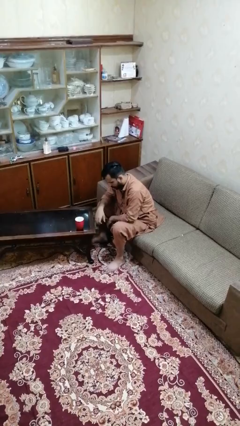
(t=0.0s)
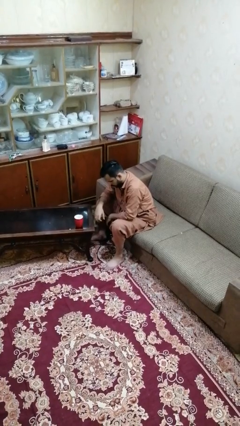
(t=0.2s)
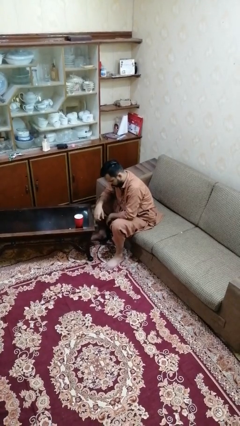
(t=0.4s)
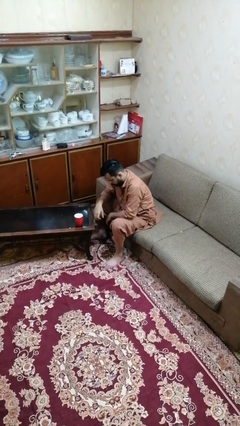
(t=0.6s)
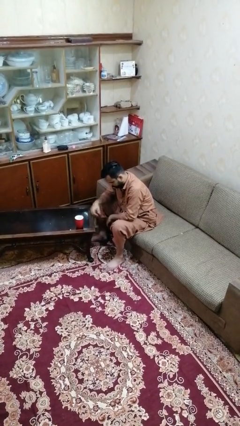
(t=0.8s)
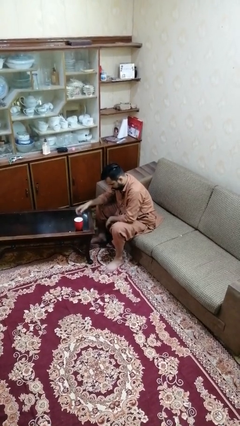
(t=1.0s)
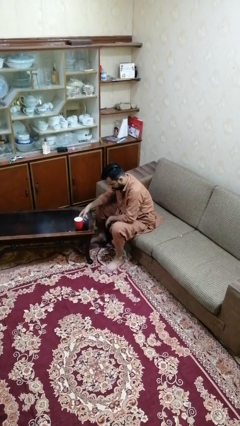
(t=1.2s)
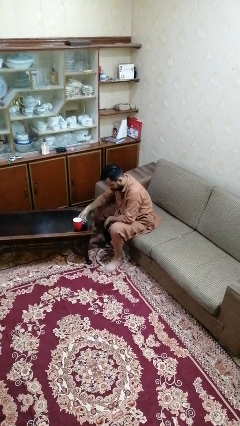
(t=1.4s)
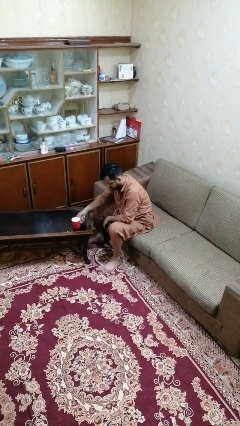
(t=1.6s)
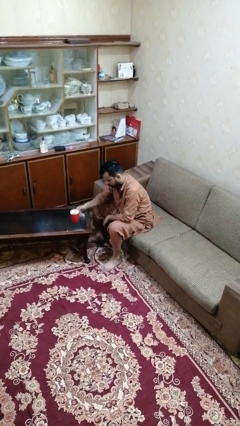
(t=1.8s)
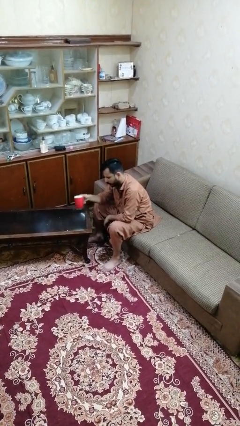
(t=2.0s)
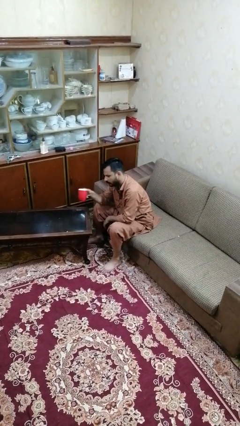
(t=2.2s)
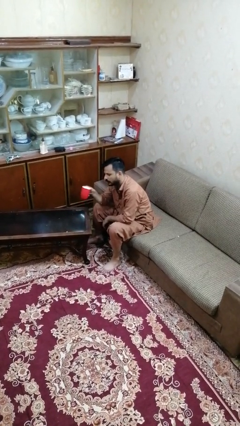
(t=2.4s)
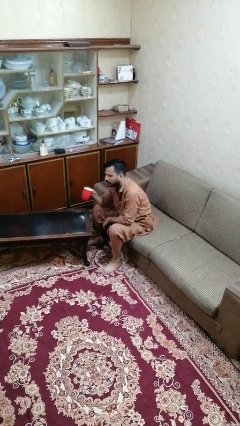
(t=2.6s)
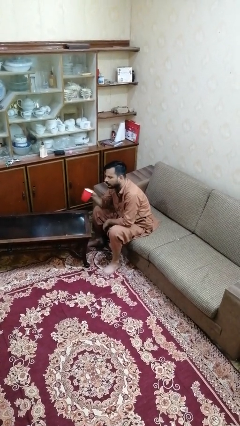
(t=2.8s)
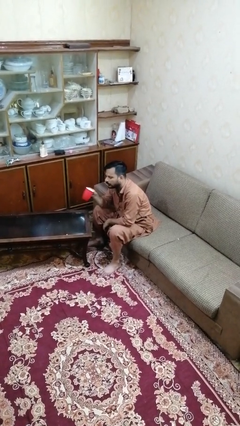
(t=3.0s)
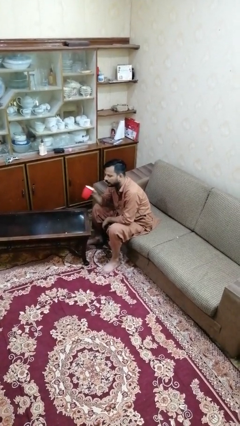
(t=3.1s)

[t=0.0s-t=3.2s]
person picks up object from table

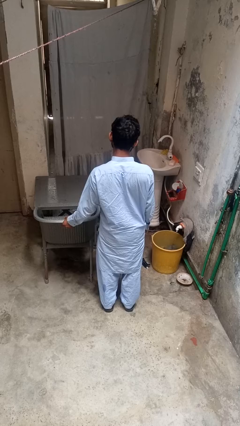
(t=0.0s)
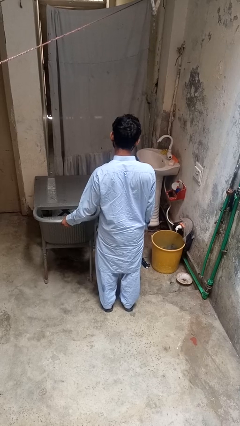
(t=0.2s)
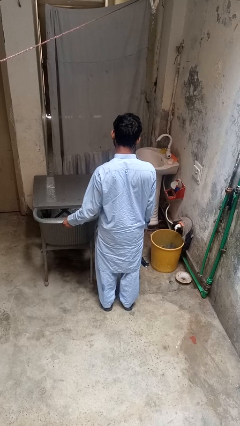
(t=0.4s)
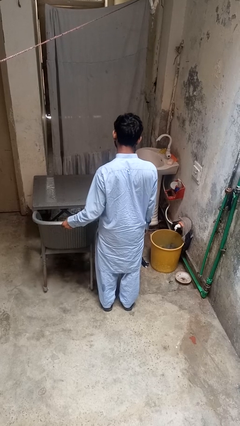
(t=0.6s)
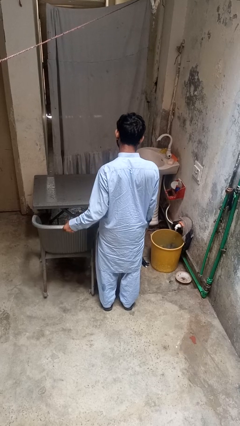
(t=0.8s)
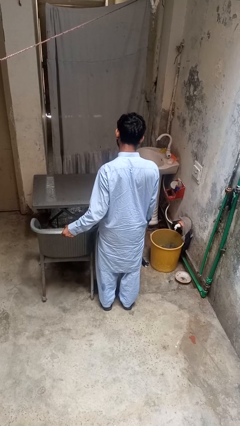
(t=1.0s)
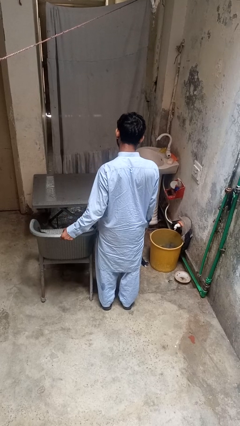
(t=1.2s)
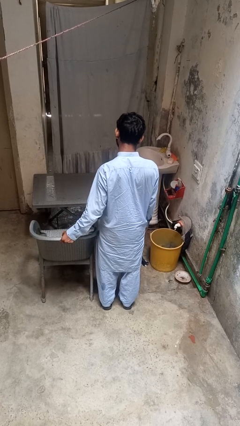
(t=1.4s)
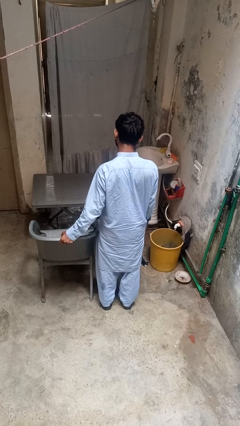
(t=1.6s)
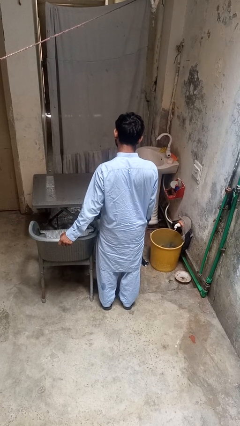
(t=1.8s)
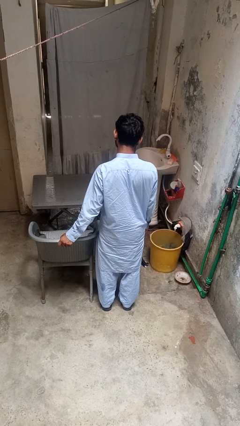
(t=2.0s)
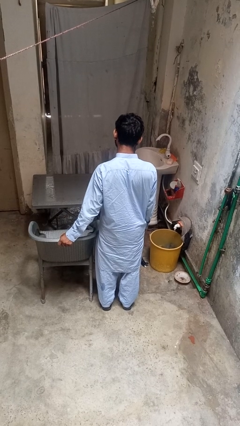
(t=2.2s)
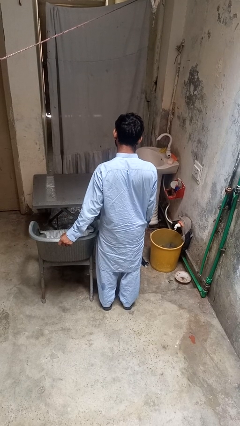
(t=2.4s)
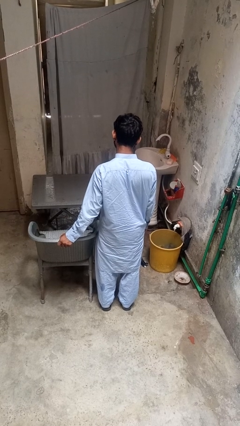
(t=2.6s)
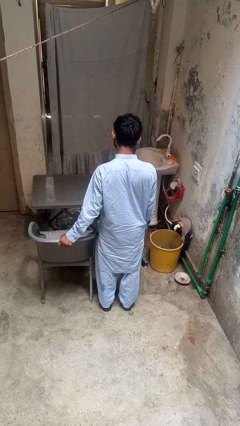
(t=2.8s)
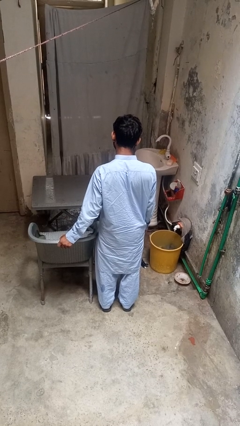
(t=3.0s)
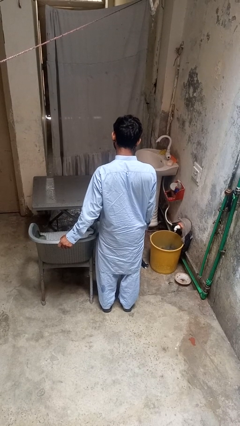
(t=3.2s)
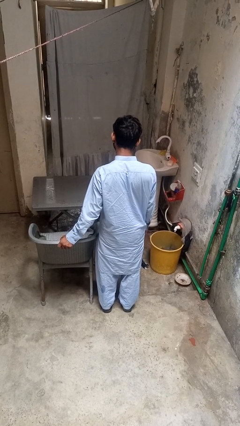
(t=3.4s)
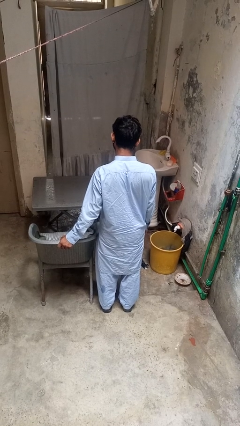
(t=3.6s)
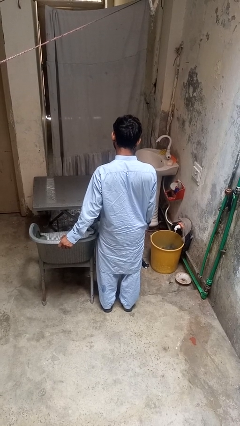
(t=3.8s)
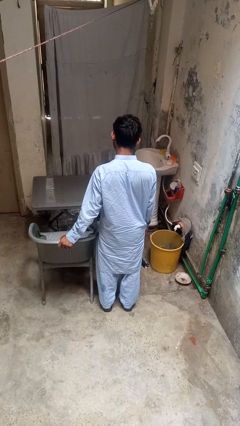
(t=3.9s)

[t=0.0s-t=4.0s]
person pulls out chair

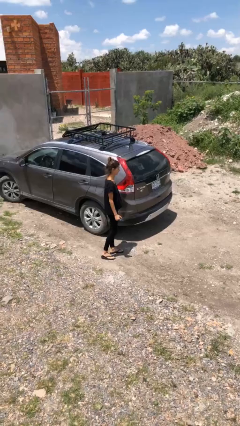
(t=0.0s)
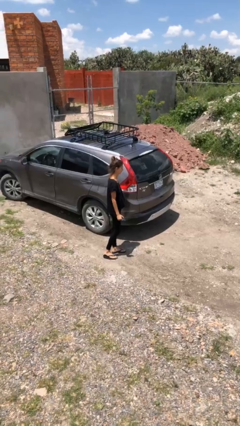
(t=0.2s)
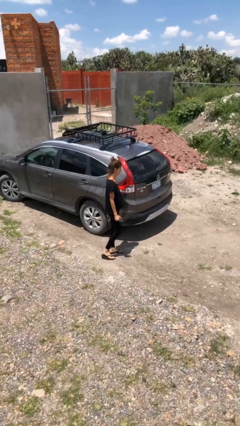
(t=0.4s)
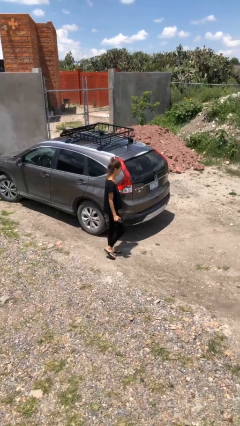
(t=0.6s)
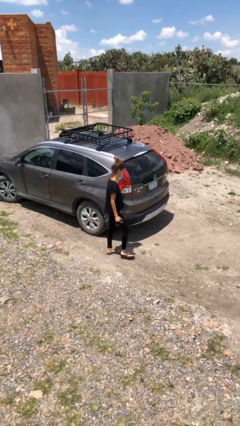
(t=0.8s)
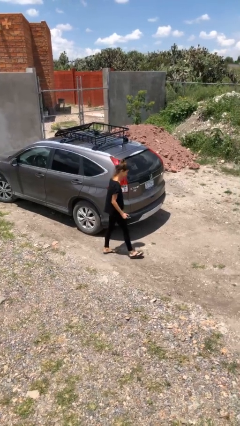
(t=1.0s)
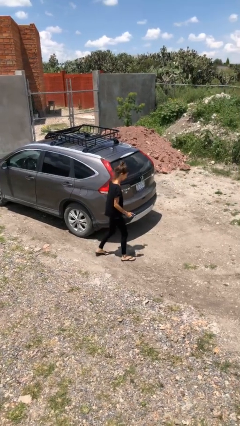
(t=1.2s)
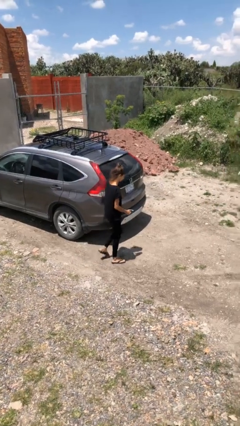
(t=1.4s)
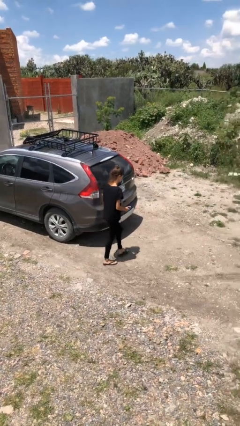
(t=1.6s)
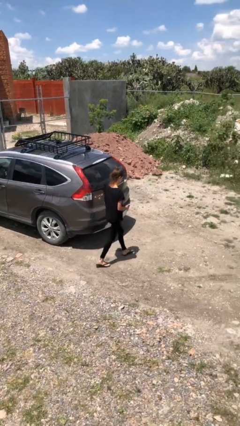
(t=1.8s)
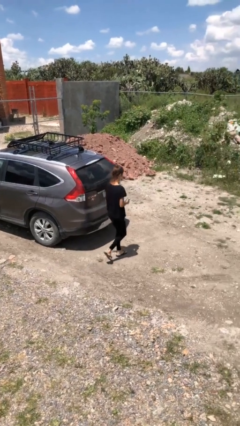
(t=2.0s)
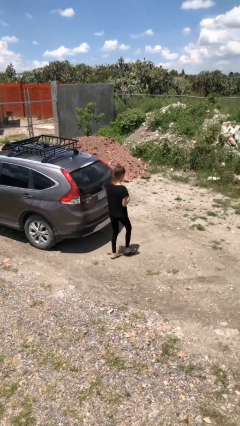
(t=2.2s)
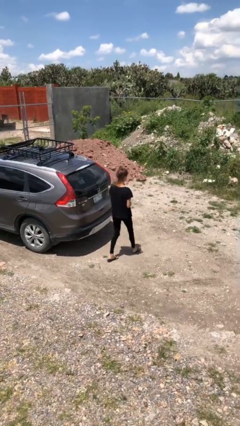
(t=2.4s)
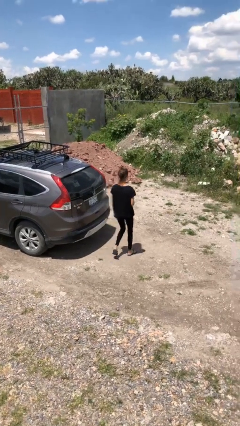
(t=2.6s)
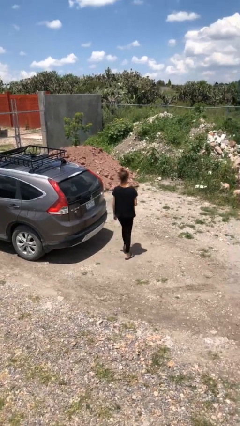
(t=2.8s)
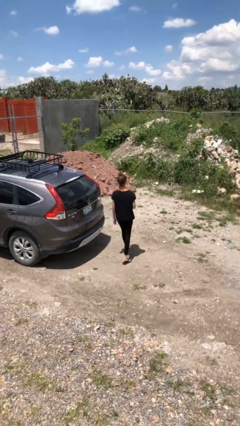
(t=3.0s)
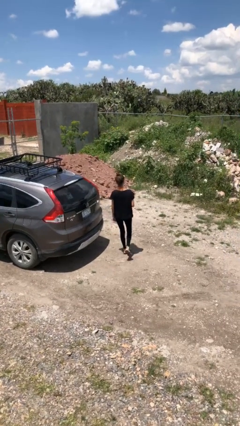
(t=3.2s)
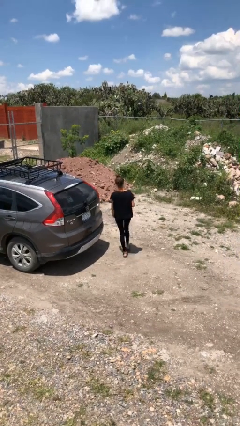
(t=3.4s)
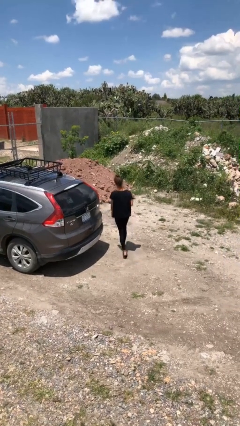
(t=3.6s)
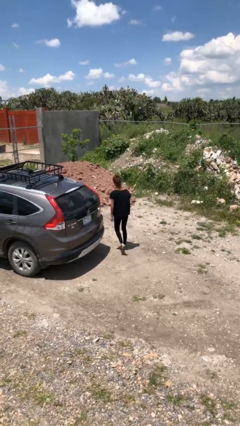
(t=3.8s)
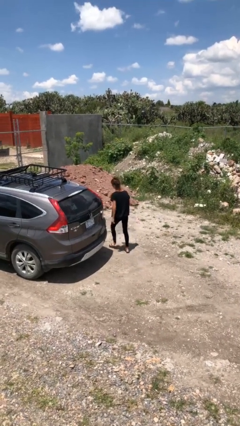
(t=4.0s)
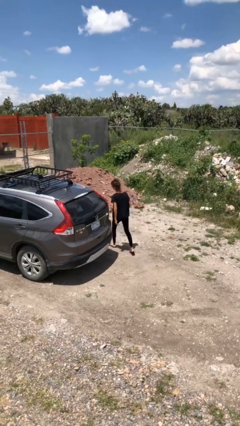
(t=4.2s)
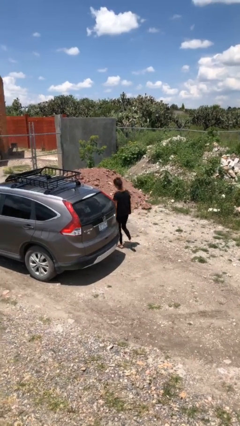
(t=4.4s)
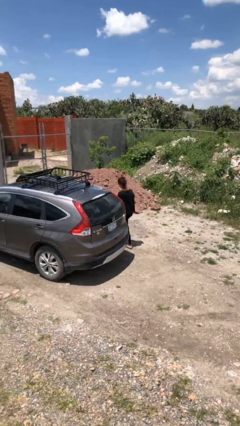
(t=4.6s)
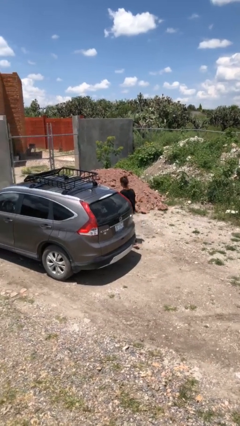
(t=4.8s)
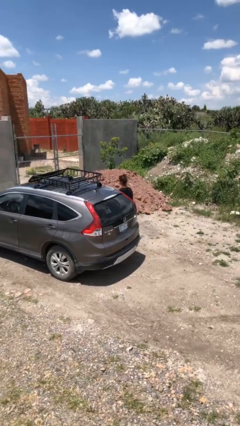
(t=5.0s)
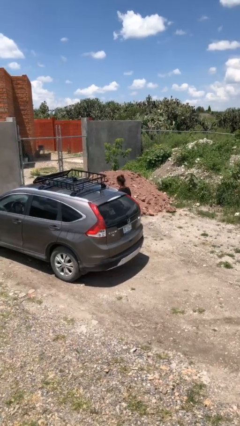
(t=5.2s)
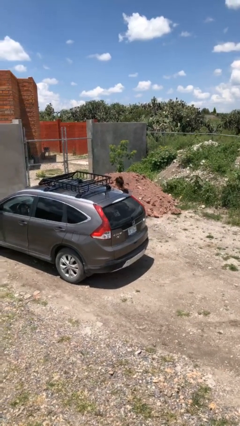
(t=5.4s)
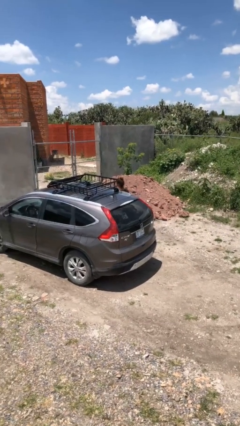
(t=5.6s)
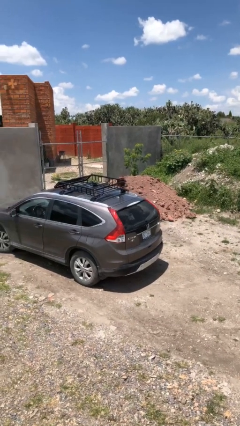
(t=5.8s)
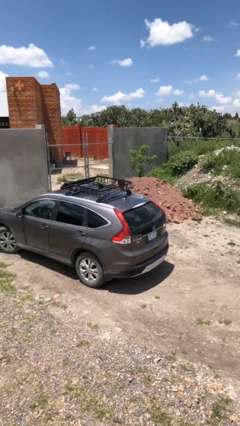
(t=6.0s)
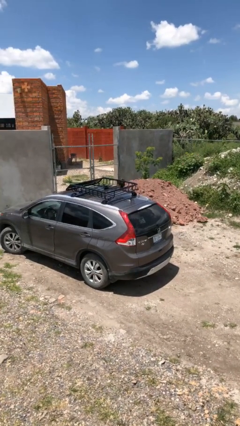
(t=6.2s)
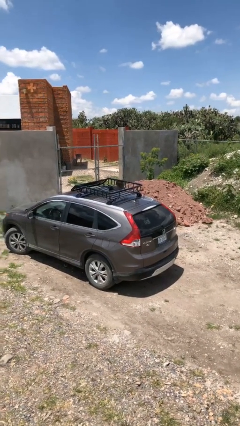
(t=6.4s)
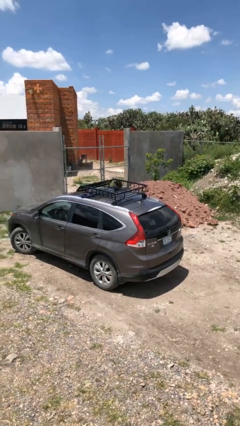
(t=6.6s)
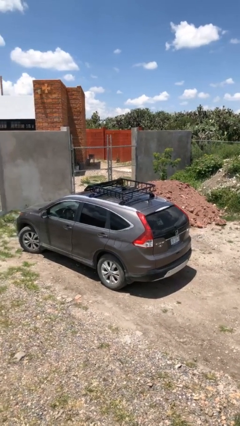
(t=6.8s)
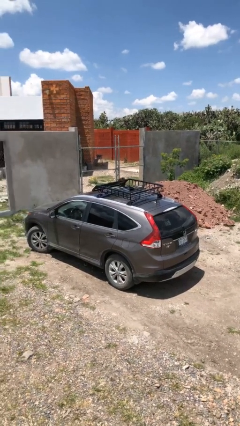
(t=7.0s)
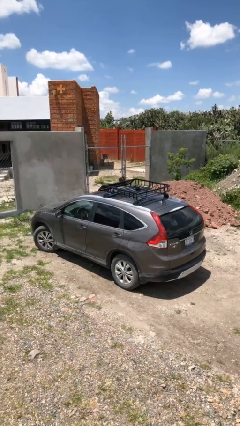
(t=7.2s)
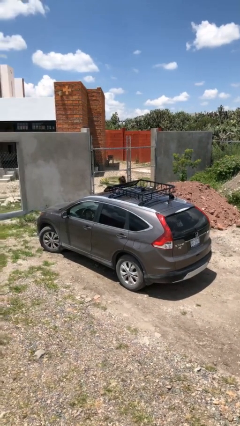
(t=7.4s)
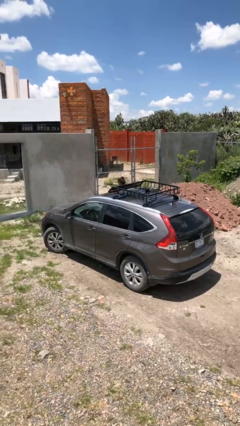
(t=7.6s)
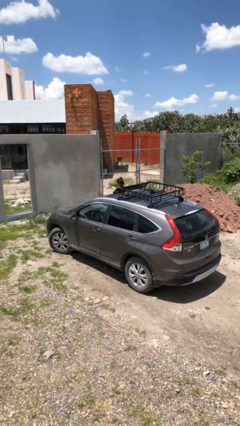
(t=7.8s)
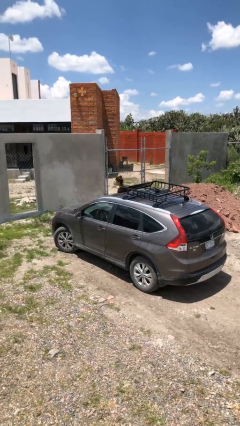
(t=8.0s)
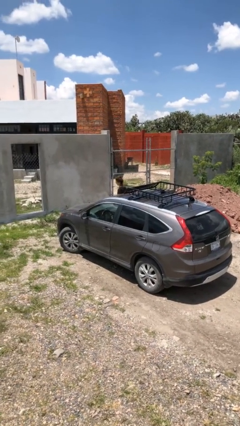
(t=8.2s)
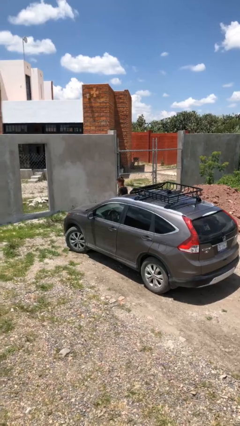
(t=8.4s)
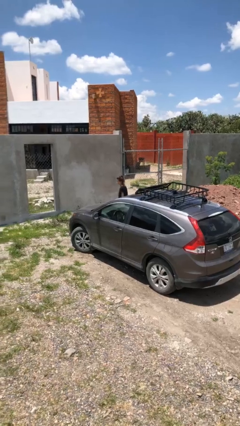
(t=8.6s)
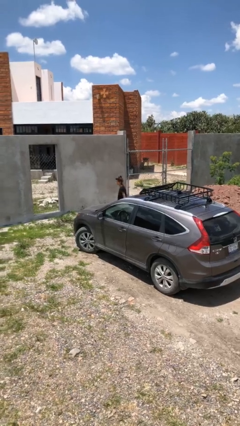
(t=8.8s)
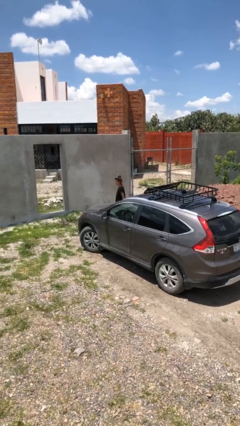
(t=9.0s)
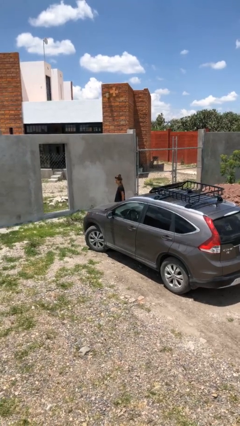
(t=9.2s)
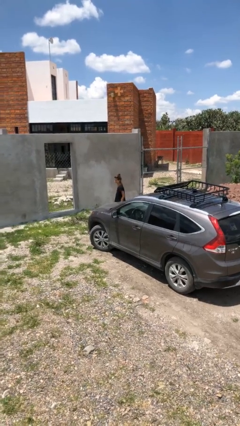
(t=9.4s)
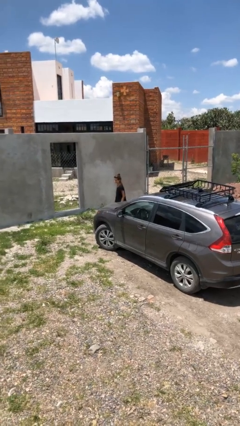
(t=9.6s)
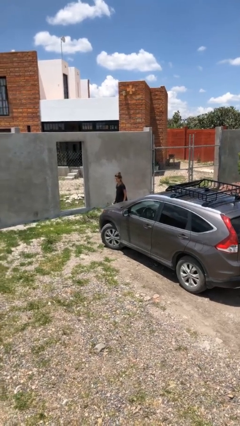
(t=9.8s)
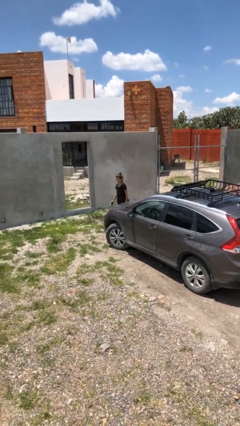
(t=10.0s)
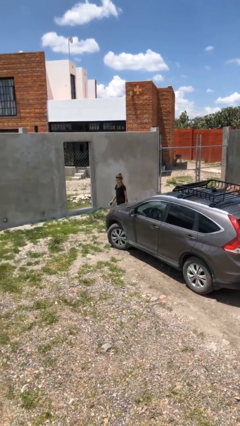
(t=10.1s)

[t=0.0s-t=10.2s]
person walks around car

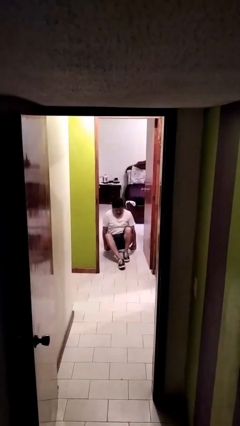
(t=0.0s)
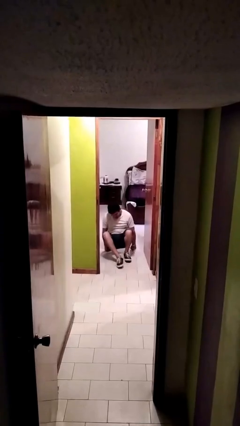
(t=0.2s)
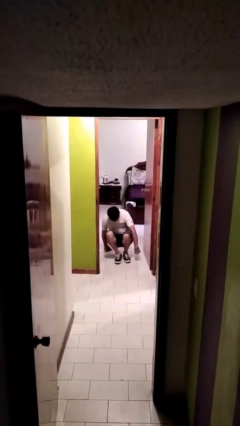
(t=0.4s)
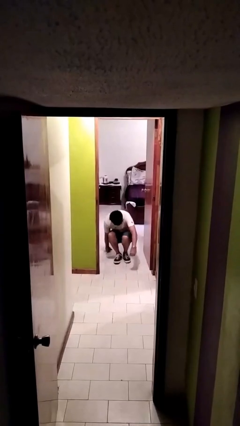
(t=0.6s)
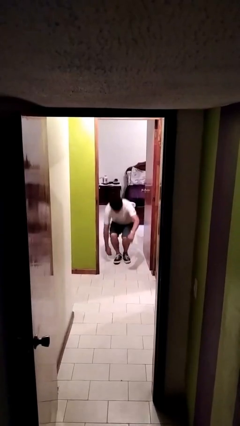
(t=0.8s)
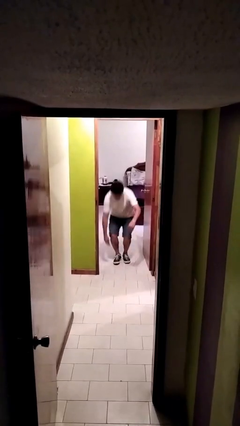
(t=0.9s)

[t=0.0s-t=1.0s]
person stands up
